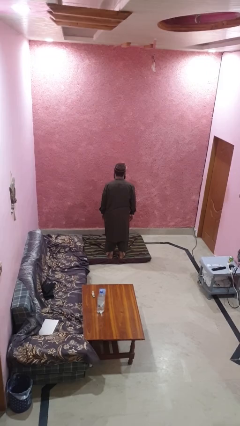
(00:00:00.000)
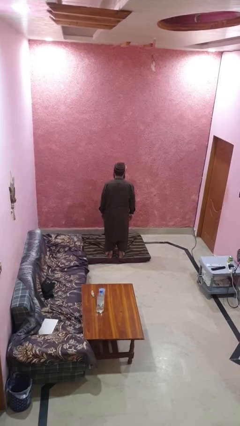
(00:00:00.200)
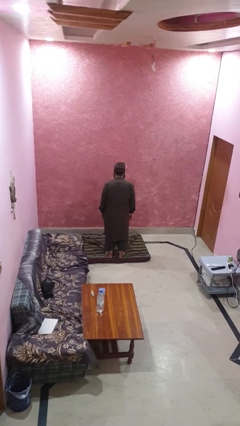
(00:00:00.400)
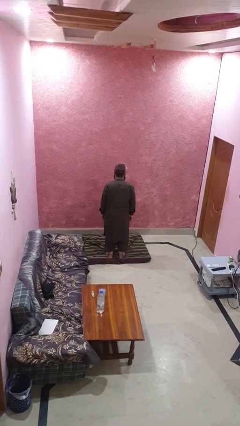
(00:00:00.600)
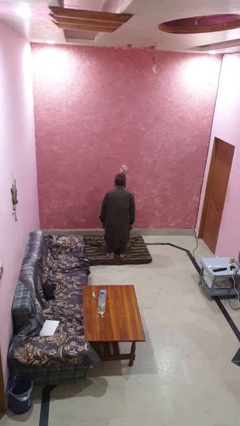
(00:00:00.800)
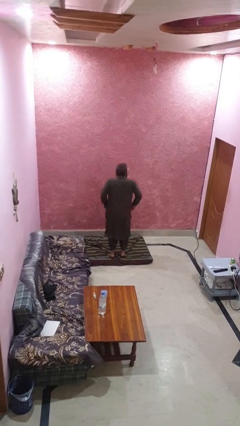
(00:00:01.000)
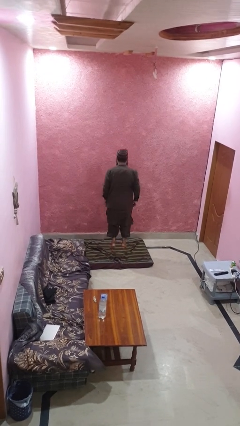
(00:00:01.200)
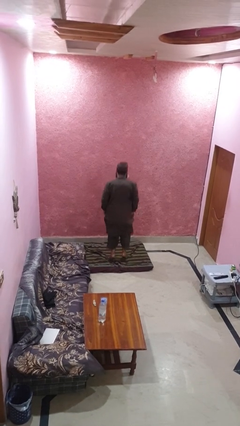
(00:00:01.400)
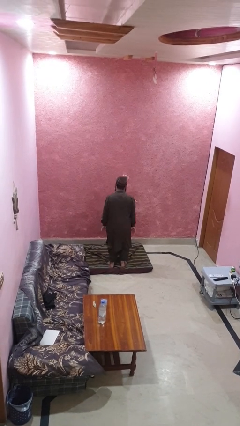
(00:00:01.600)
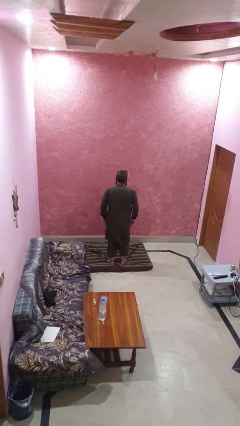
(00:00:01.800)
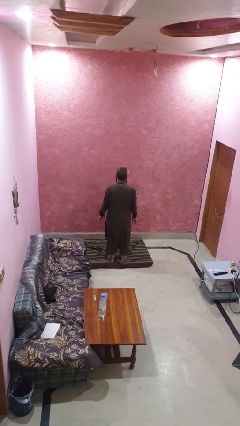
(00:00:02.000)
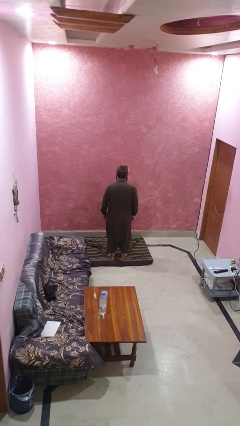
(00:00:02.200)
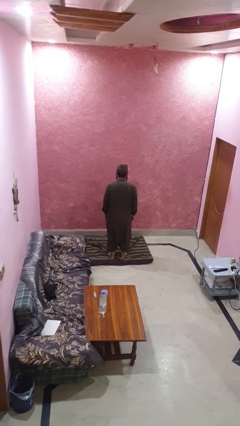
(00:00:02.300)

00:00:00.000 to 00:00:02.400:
person jumps

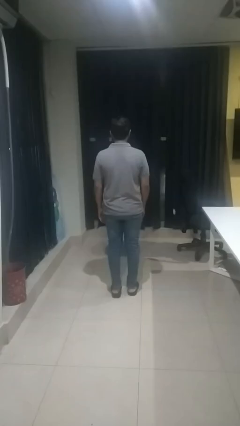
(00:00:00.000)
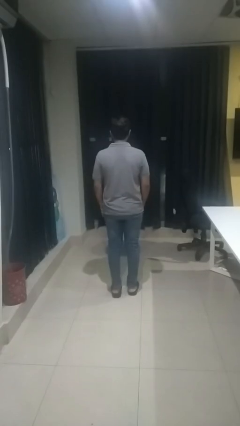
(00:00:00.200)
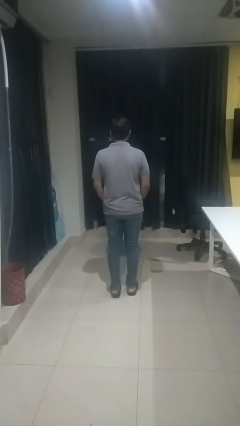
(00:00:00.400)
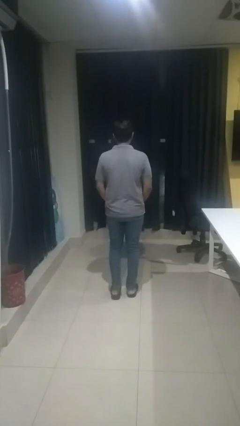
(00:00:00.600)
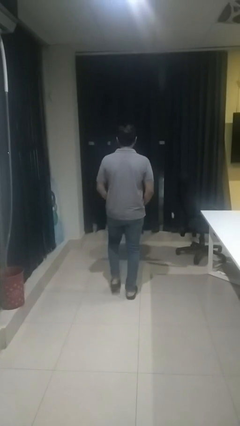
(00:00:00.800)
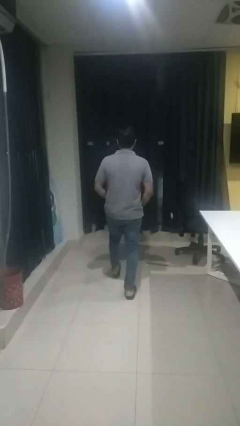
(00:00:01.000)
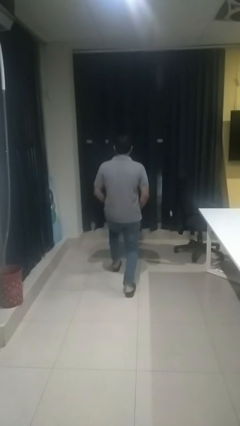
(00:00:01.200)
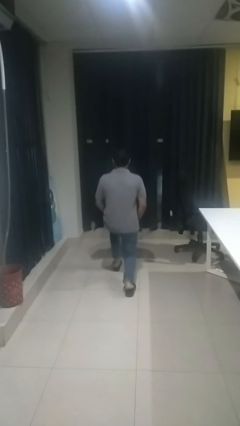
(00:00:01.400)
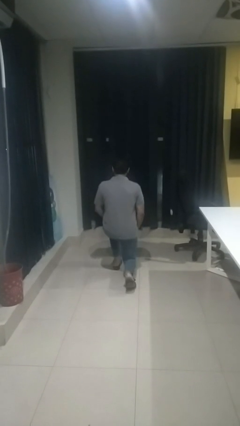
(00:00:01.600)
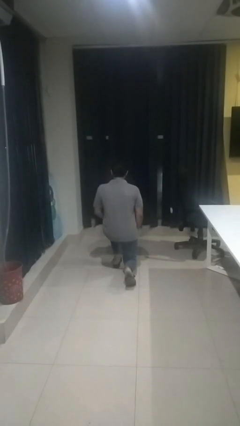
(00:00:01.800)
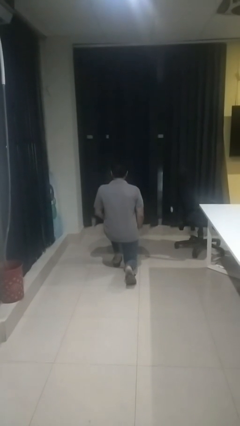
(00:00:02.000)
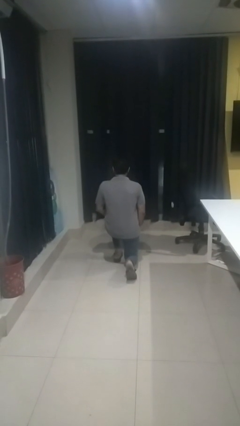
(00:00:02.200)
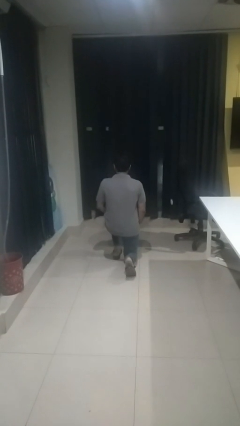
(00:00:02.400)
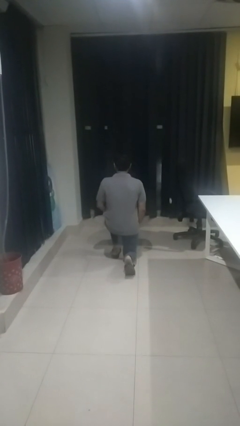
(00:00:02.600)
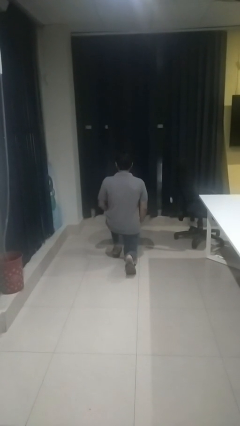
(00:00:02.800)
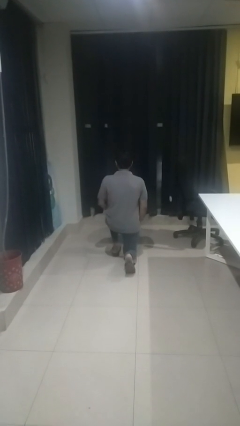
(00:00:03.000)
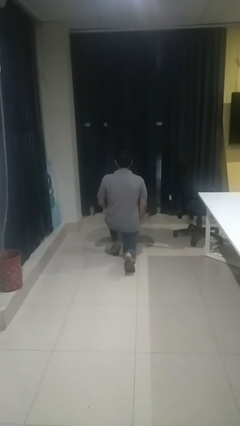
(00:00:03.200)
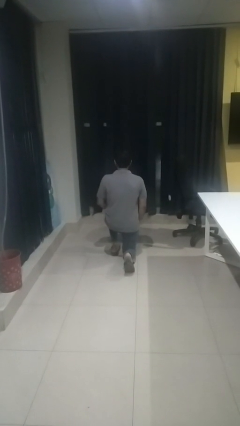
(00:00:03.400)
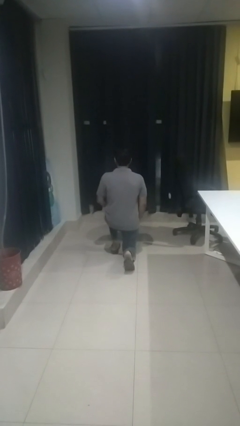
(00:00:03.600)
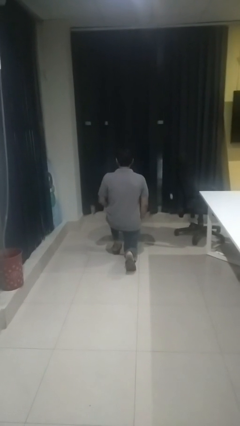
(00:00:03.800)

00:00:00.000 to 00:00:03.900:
person kneels

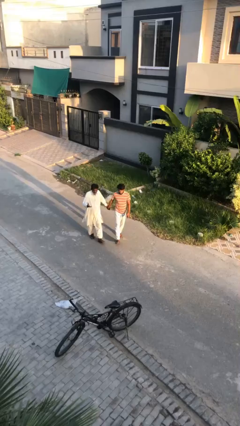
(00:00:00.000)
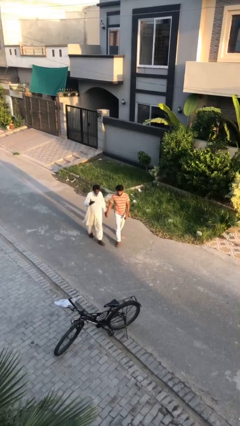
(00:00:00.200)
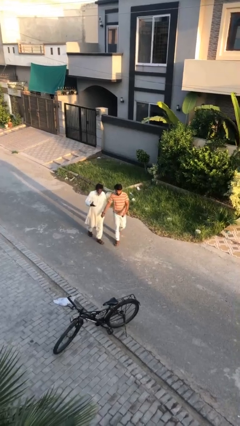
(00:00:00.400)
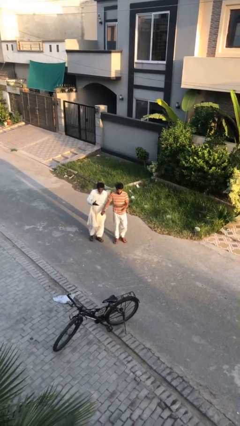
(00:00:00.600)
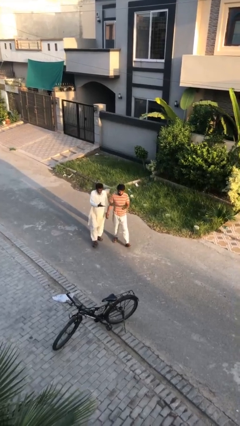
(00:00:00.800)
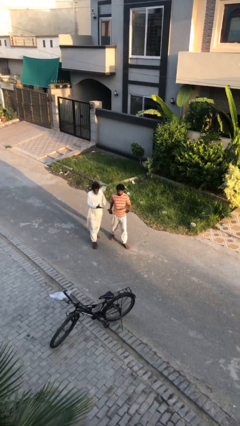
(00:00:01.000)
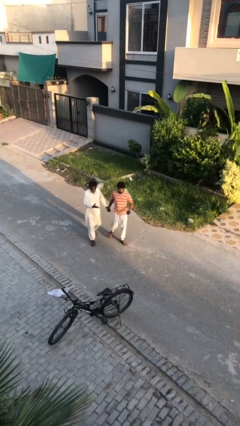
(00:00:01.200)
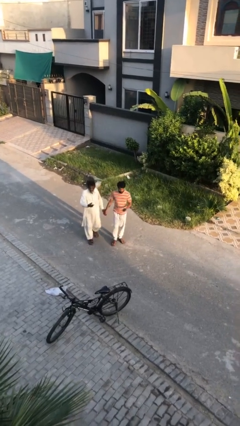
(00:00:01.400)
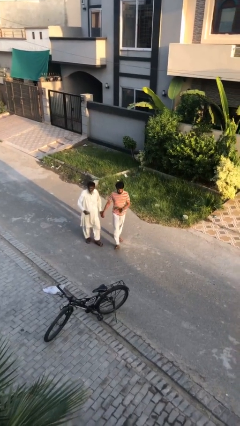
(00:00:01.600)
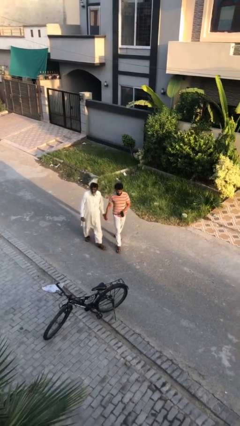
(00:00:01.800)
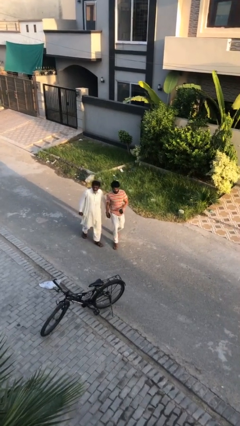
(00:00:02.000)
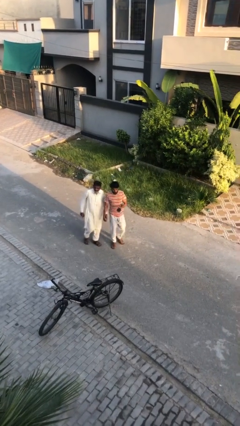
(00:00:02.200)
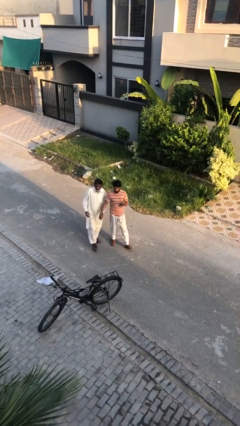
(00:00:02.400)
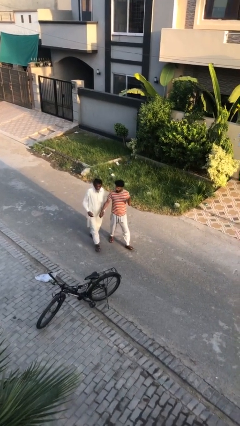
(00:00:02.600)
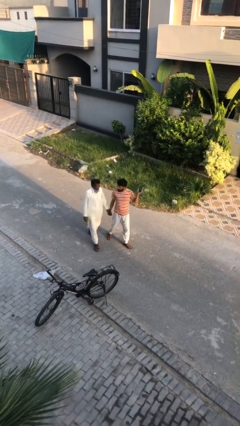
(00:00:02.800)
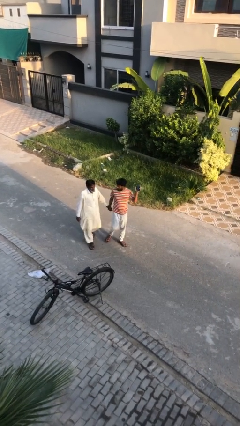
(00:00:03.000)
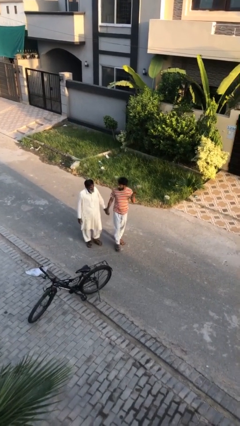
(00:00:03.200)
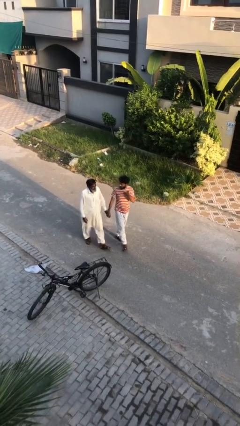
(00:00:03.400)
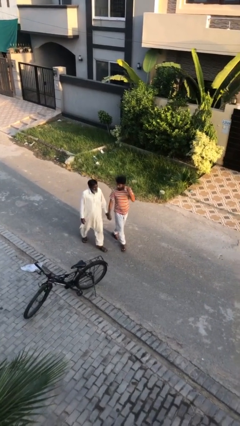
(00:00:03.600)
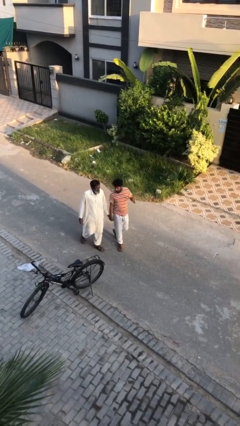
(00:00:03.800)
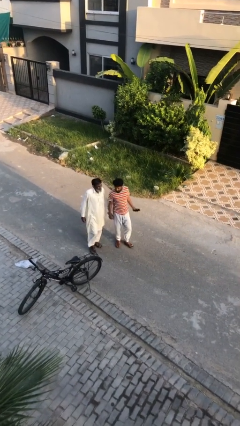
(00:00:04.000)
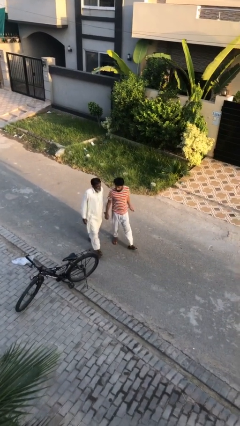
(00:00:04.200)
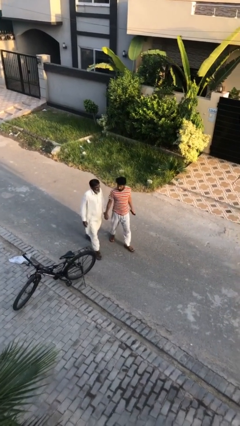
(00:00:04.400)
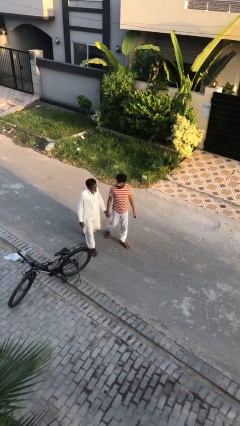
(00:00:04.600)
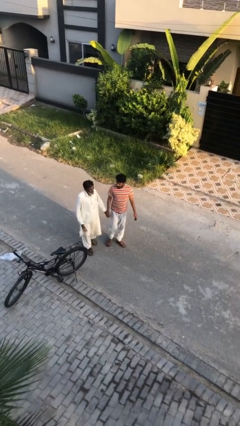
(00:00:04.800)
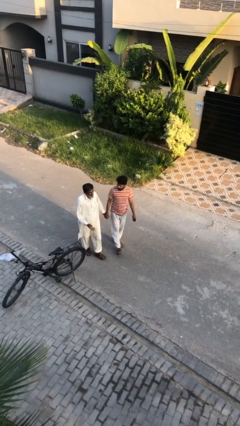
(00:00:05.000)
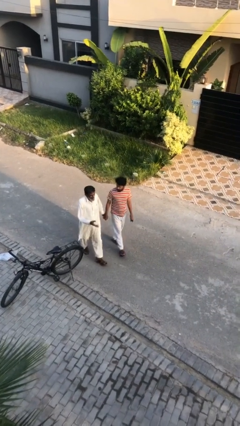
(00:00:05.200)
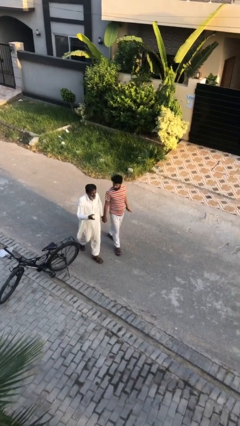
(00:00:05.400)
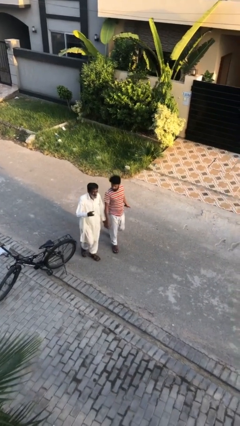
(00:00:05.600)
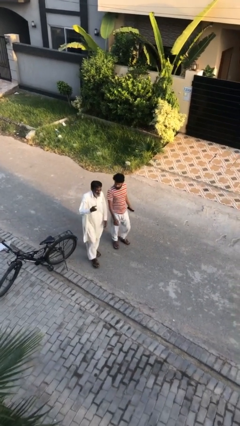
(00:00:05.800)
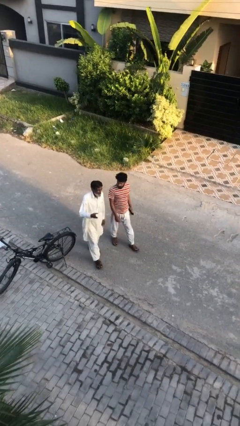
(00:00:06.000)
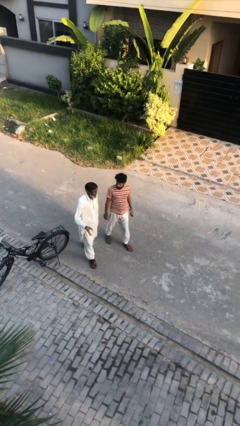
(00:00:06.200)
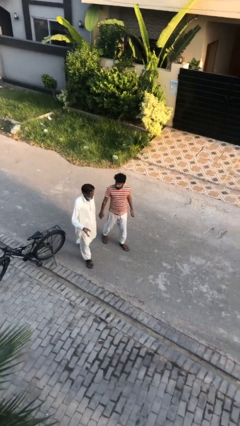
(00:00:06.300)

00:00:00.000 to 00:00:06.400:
person holds hand

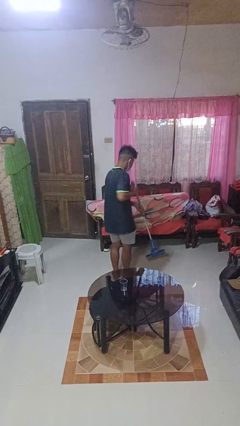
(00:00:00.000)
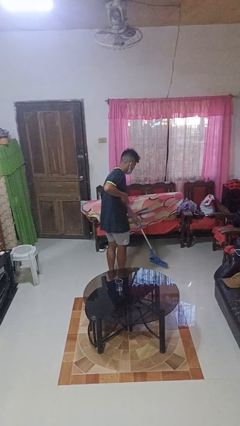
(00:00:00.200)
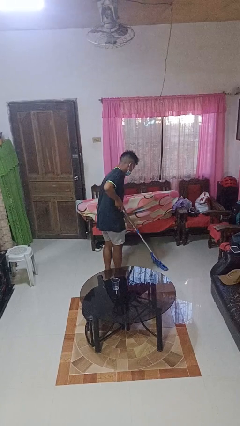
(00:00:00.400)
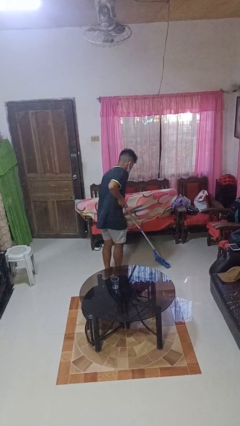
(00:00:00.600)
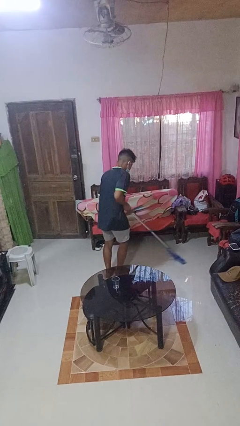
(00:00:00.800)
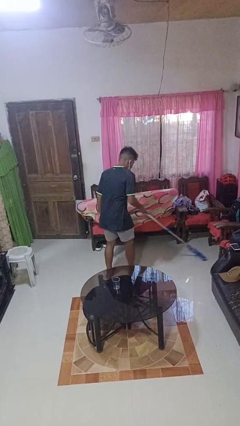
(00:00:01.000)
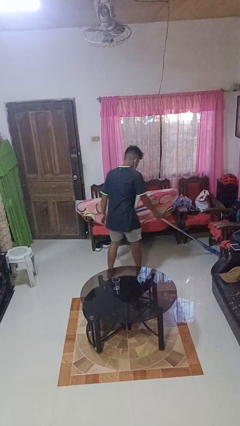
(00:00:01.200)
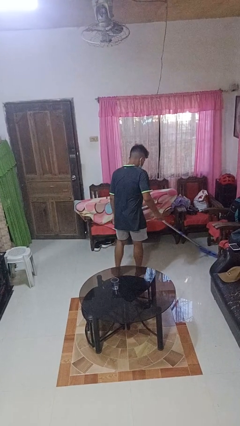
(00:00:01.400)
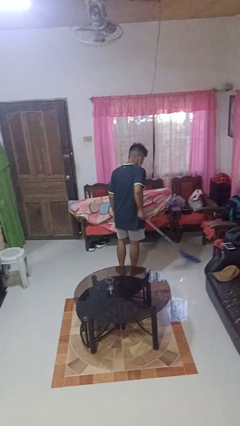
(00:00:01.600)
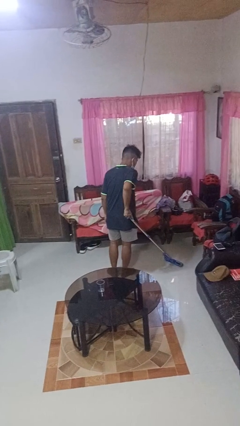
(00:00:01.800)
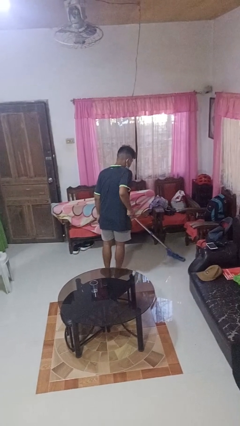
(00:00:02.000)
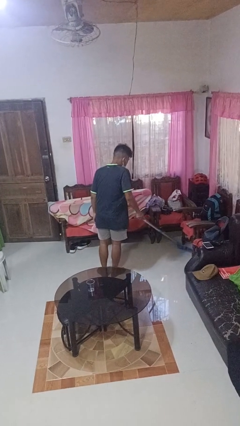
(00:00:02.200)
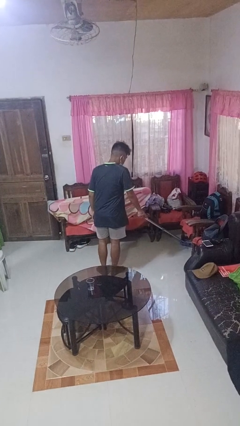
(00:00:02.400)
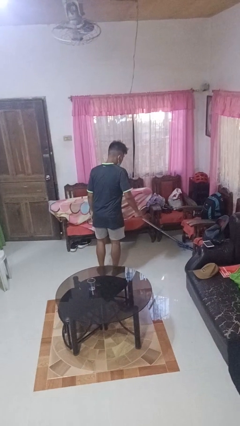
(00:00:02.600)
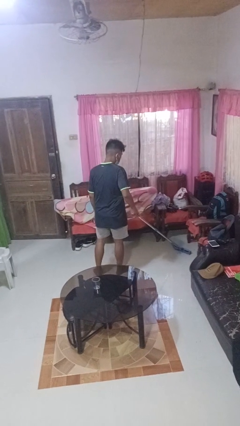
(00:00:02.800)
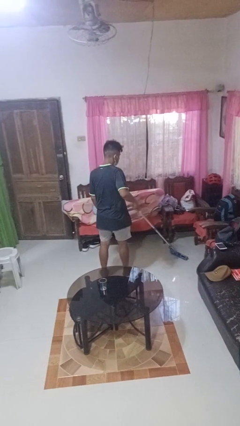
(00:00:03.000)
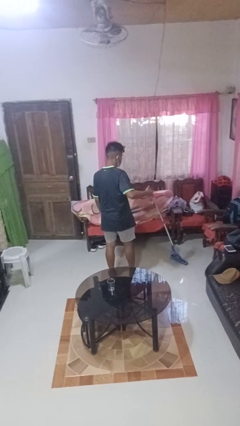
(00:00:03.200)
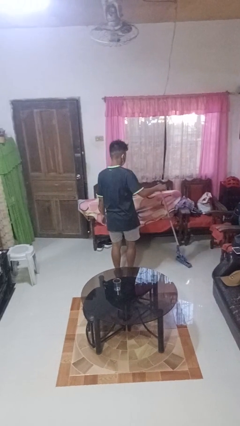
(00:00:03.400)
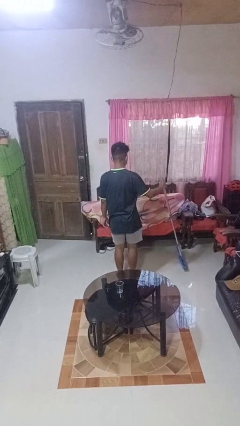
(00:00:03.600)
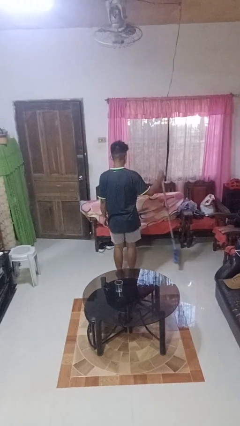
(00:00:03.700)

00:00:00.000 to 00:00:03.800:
person mops

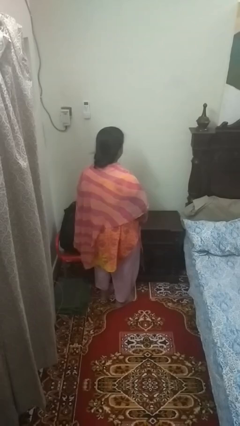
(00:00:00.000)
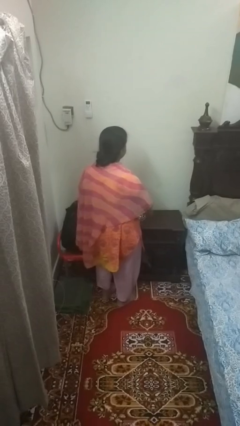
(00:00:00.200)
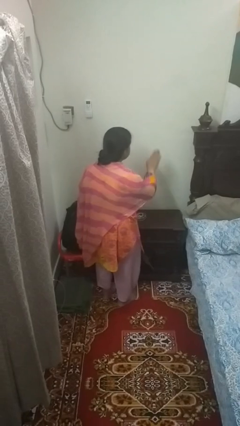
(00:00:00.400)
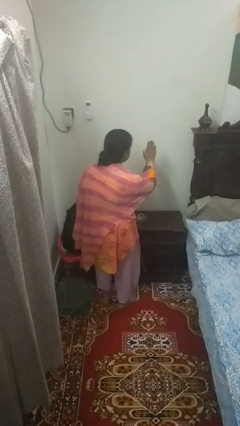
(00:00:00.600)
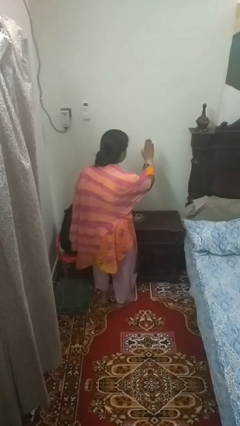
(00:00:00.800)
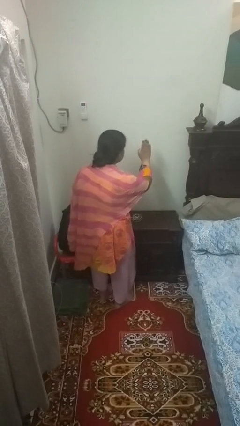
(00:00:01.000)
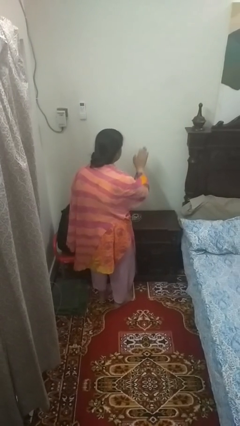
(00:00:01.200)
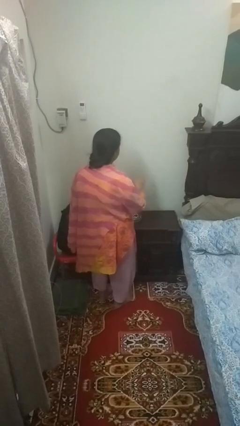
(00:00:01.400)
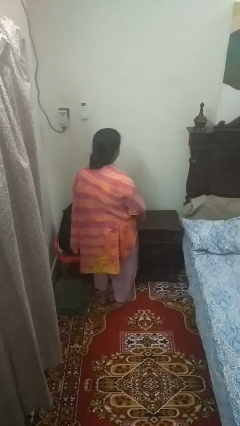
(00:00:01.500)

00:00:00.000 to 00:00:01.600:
person gestures stop
